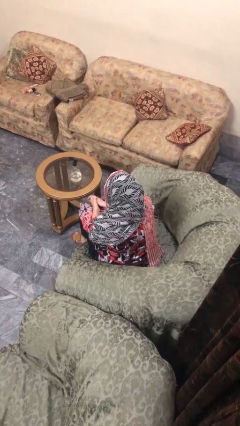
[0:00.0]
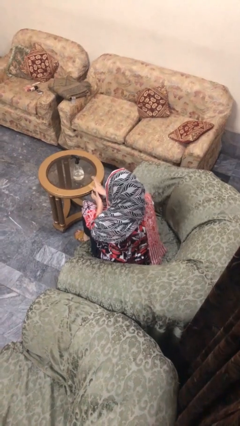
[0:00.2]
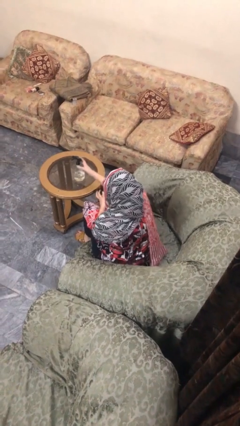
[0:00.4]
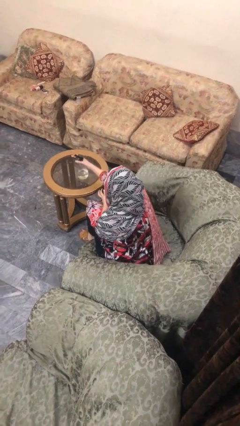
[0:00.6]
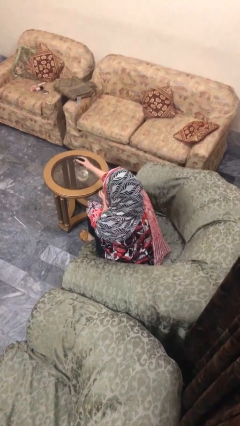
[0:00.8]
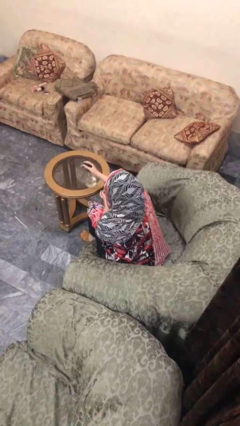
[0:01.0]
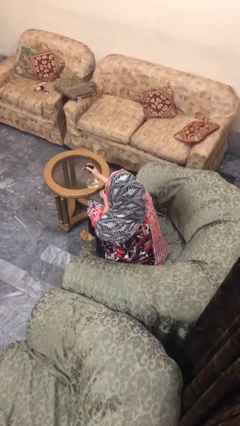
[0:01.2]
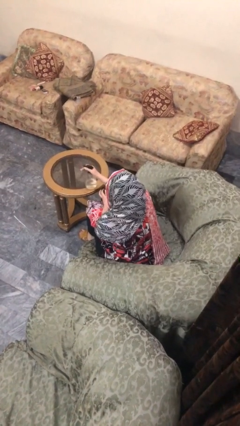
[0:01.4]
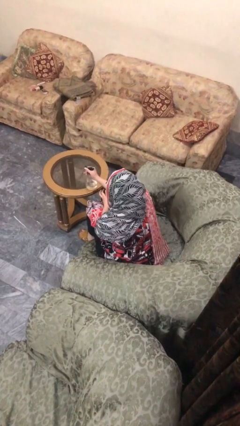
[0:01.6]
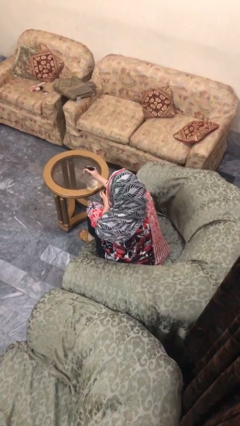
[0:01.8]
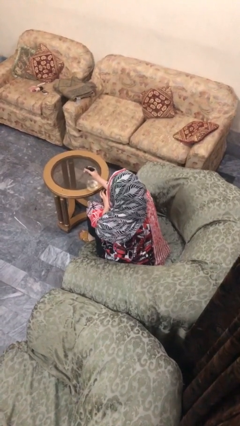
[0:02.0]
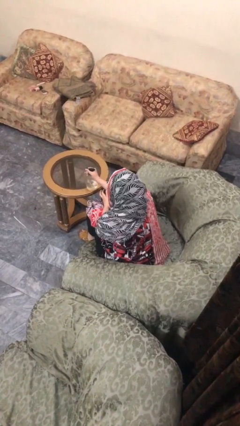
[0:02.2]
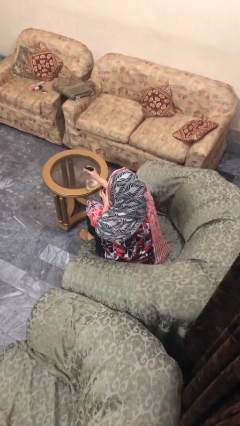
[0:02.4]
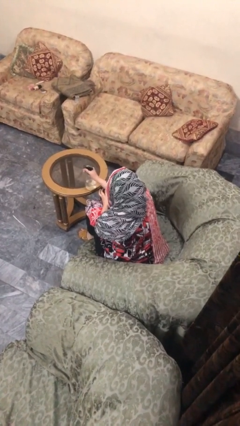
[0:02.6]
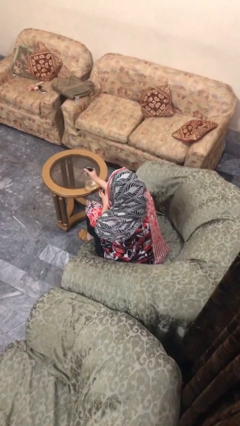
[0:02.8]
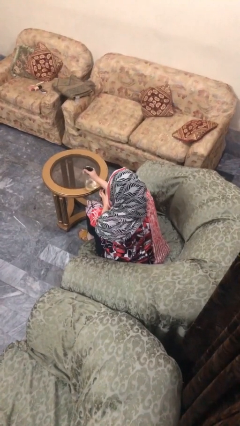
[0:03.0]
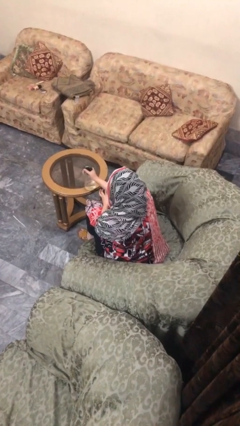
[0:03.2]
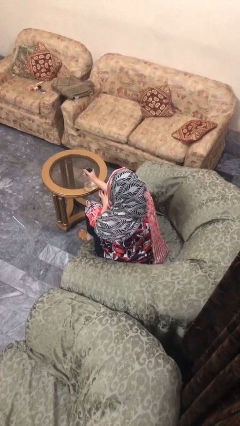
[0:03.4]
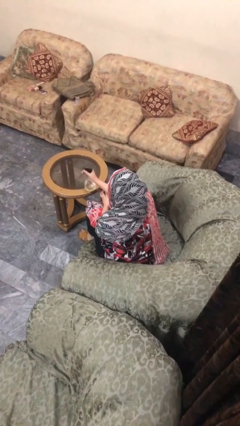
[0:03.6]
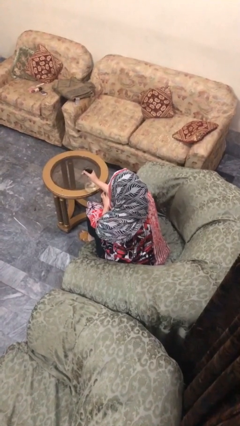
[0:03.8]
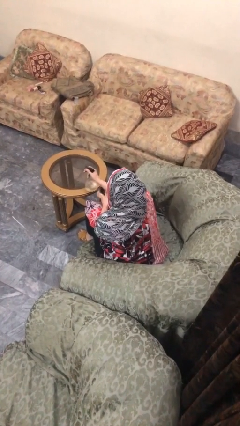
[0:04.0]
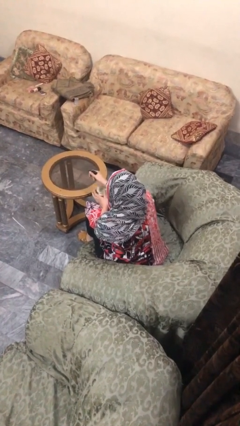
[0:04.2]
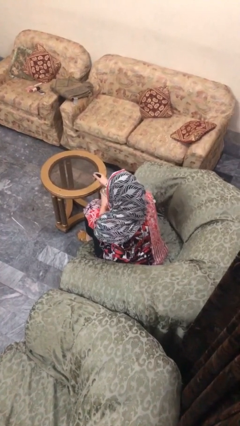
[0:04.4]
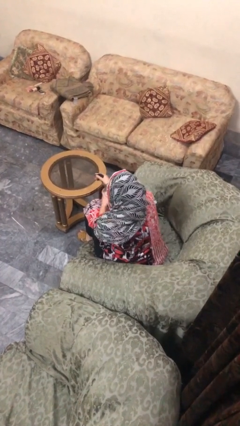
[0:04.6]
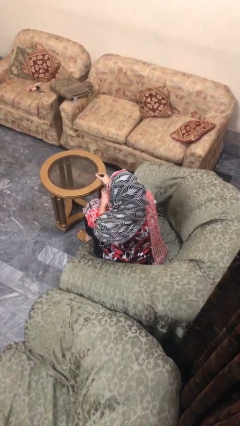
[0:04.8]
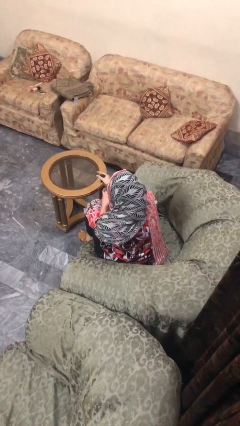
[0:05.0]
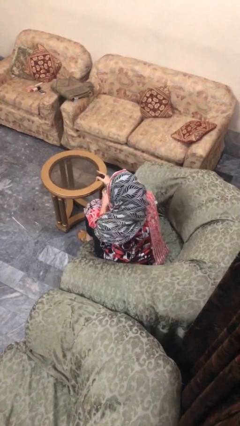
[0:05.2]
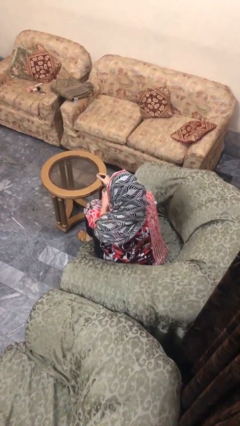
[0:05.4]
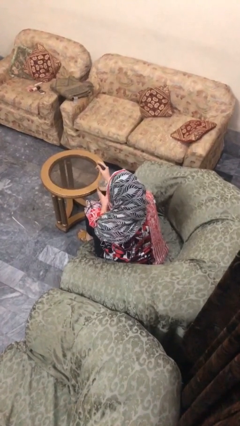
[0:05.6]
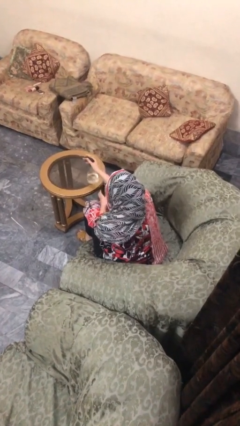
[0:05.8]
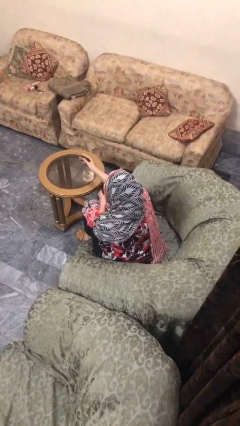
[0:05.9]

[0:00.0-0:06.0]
person sprays from bottle

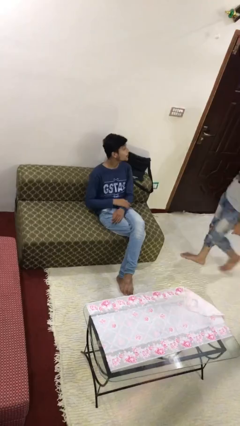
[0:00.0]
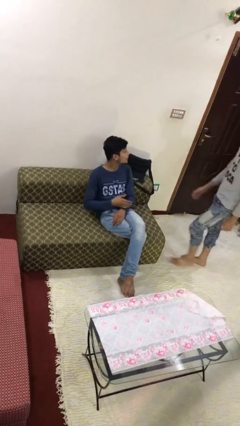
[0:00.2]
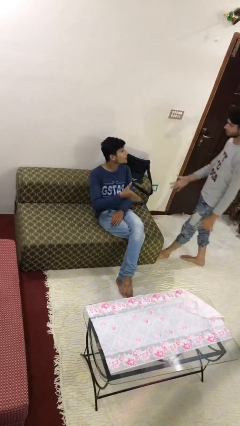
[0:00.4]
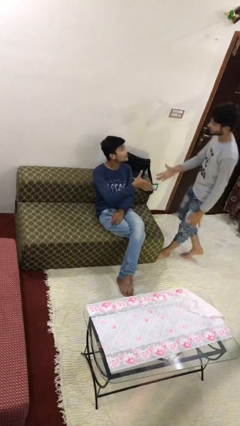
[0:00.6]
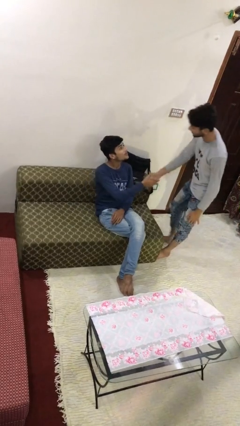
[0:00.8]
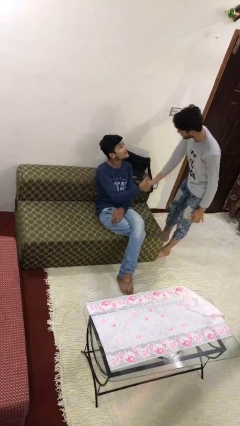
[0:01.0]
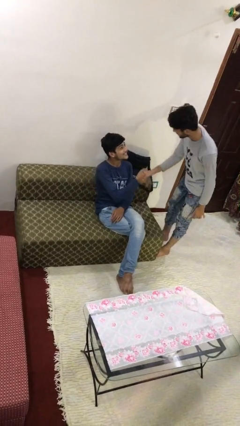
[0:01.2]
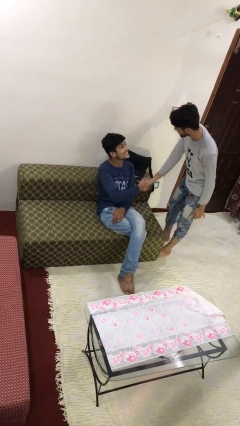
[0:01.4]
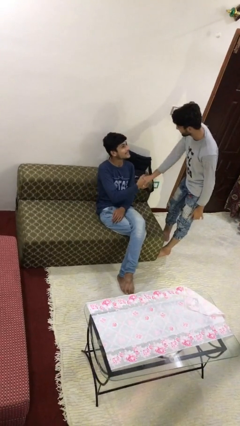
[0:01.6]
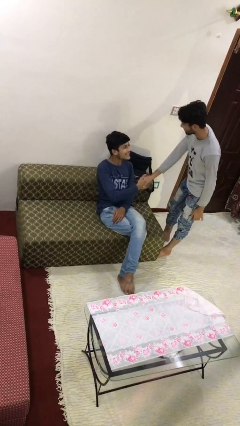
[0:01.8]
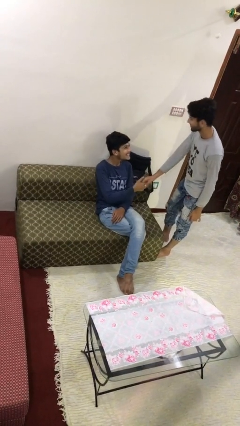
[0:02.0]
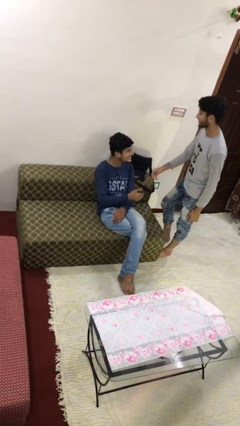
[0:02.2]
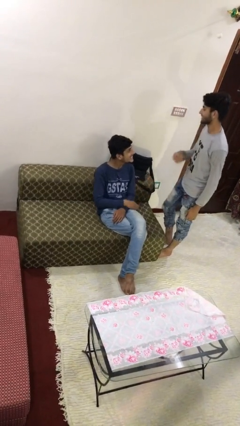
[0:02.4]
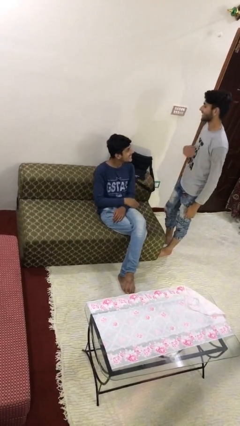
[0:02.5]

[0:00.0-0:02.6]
person shakes hand

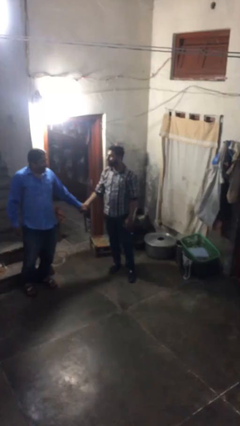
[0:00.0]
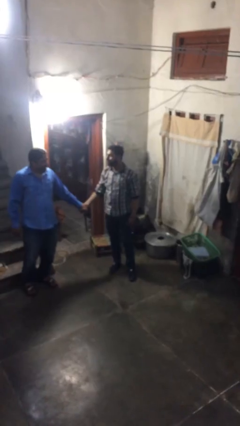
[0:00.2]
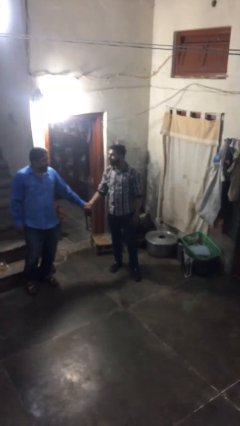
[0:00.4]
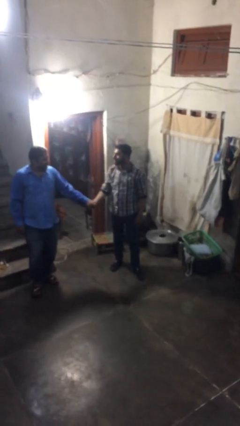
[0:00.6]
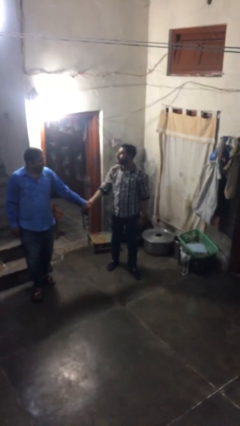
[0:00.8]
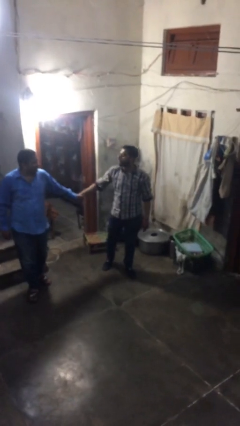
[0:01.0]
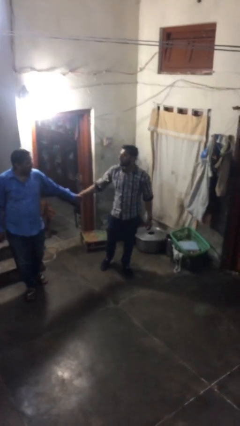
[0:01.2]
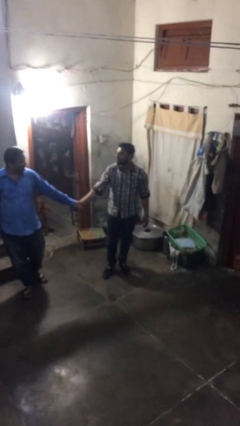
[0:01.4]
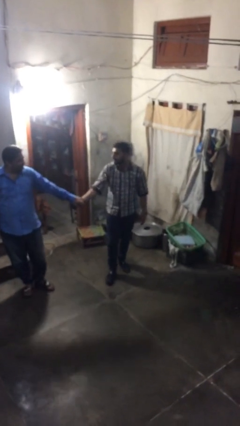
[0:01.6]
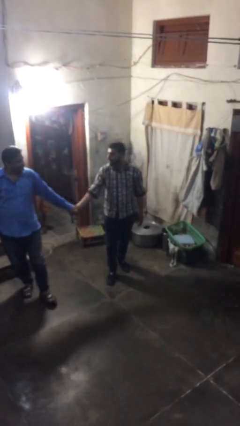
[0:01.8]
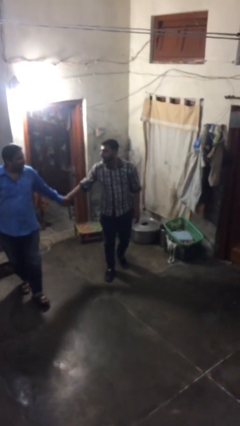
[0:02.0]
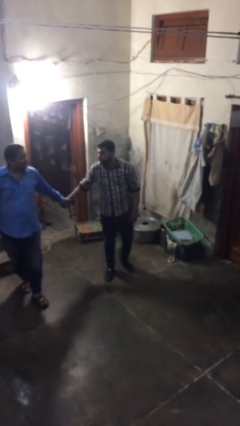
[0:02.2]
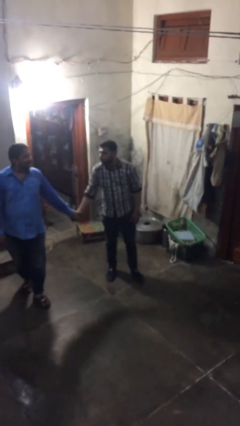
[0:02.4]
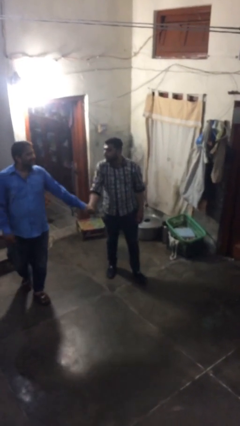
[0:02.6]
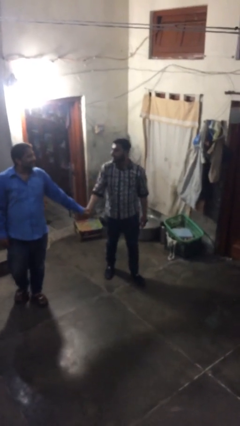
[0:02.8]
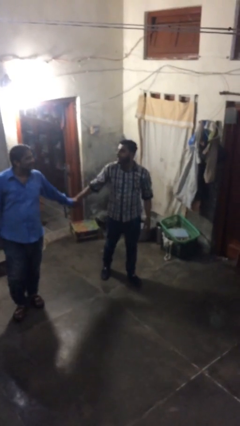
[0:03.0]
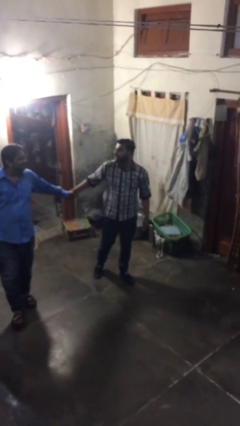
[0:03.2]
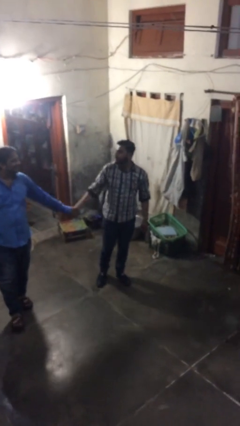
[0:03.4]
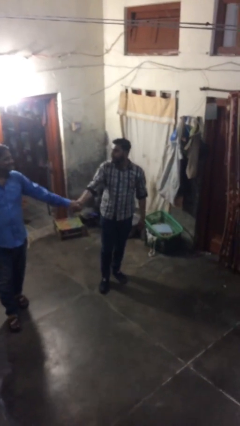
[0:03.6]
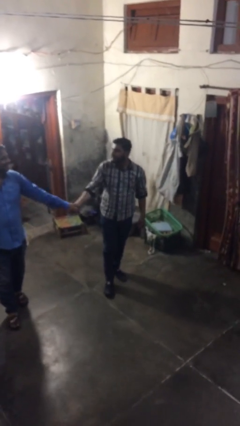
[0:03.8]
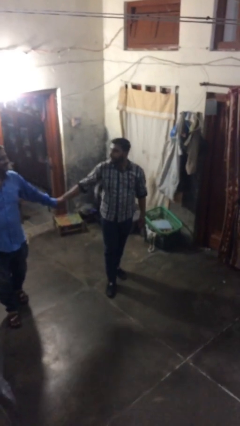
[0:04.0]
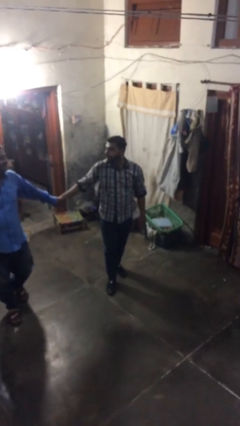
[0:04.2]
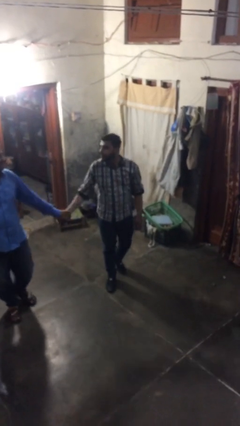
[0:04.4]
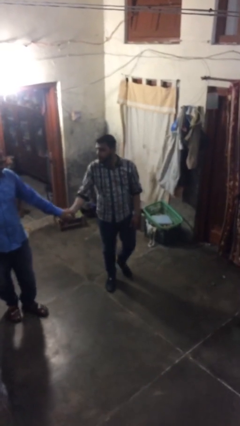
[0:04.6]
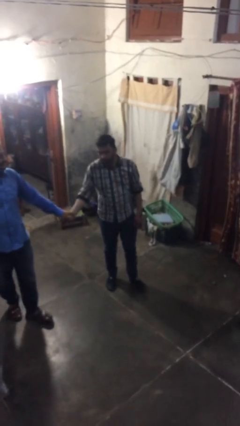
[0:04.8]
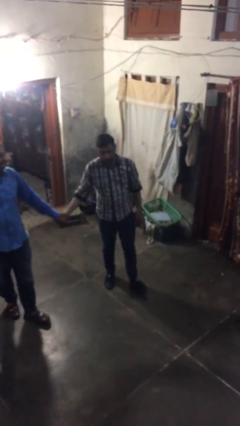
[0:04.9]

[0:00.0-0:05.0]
person holds hand

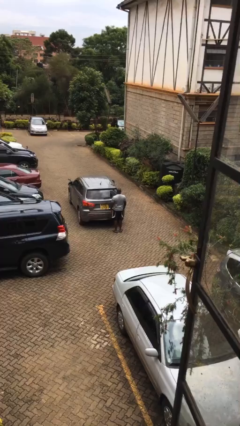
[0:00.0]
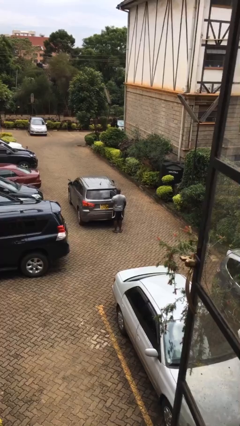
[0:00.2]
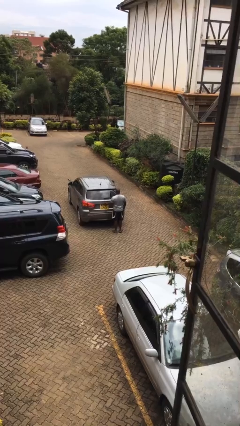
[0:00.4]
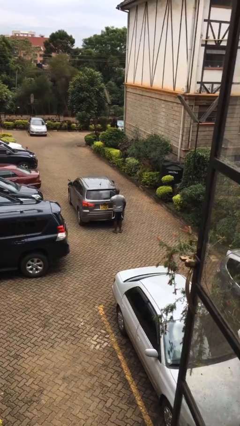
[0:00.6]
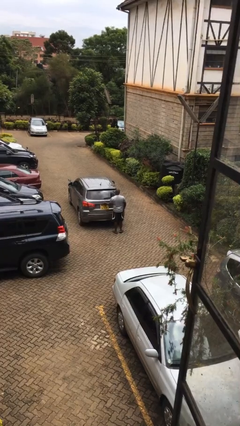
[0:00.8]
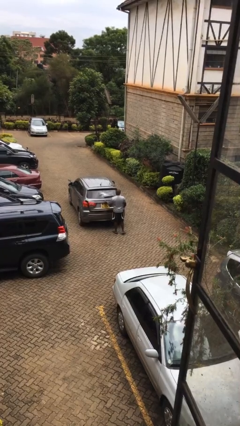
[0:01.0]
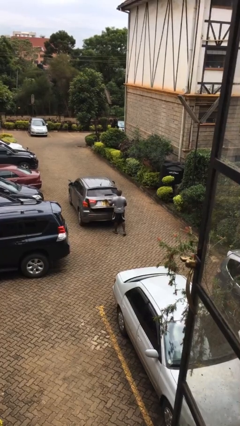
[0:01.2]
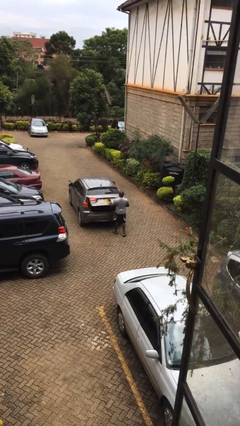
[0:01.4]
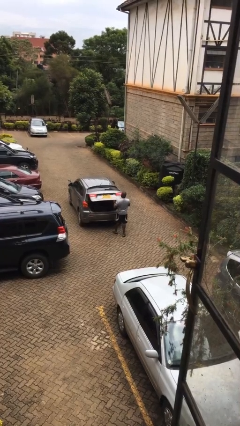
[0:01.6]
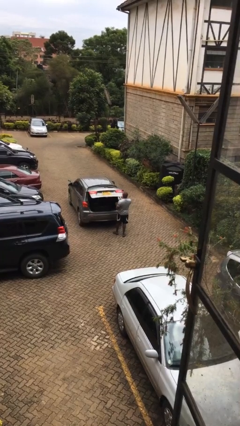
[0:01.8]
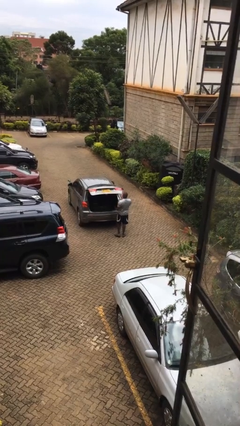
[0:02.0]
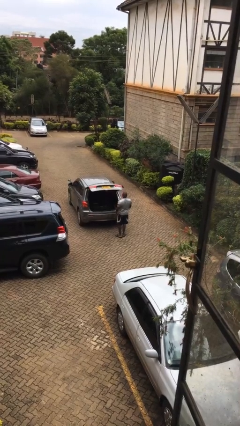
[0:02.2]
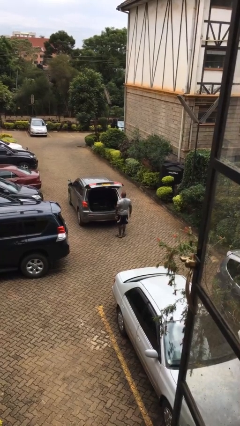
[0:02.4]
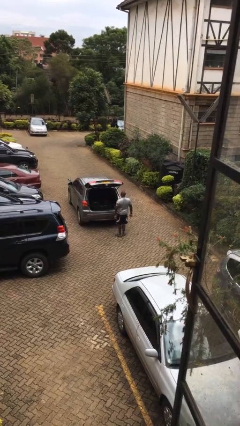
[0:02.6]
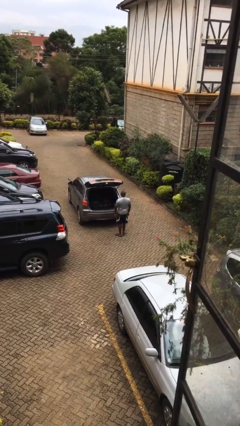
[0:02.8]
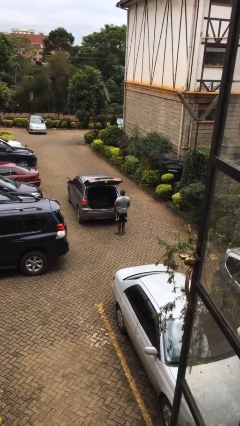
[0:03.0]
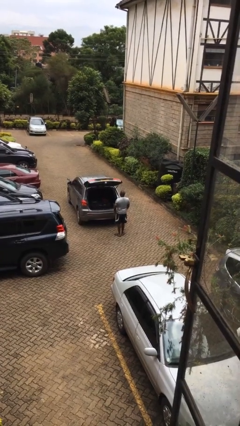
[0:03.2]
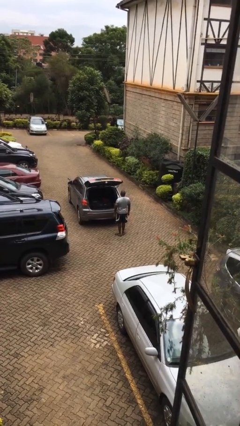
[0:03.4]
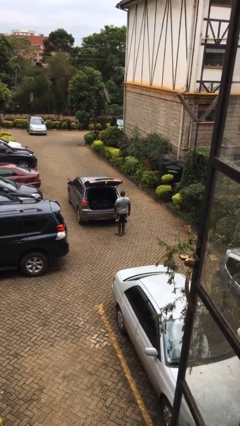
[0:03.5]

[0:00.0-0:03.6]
person opens car trunk

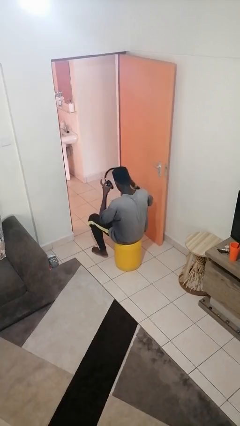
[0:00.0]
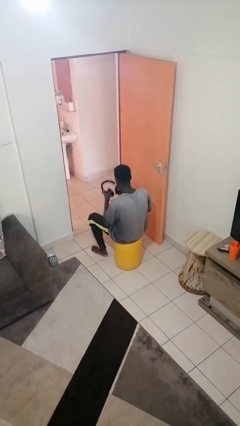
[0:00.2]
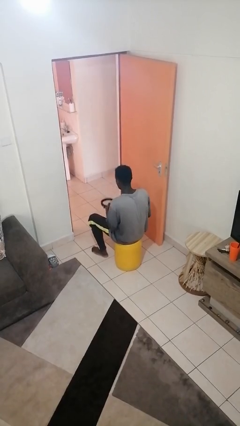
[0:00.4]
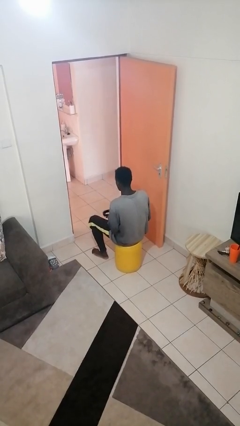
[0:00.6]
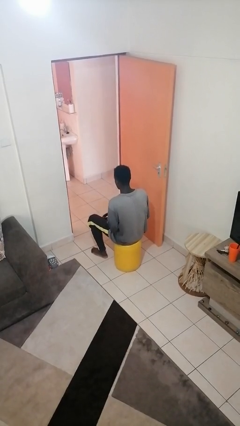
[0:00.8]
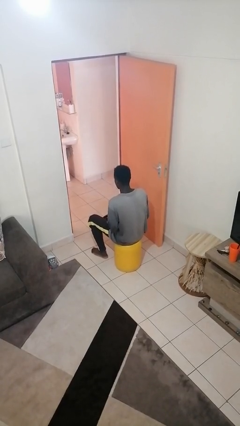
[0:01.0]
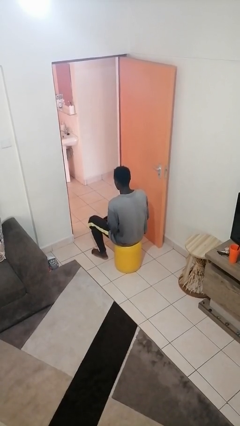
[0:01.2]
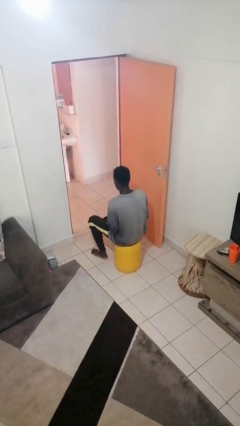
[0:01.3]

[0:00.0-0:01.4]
person takes off headphones
